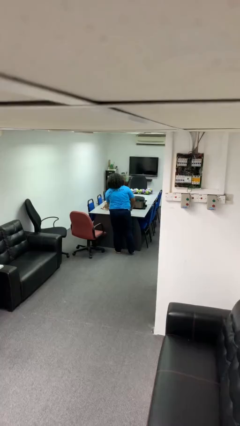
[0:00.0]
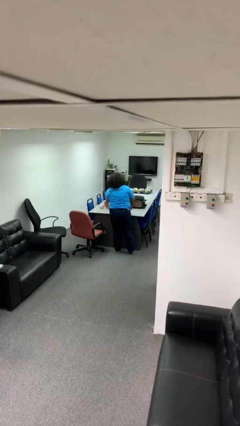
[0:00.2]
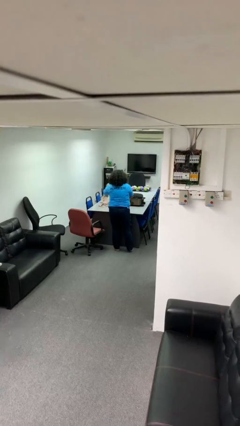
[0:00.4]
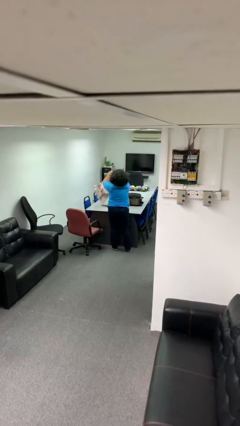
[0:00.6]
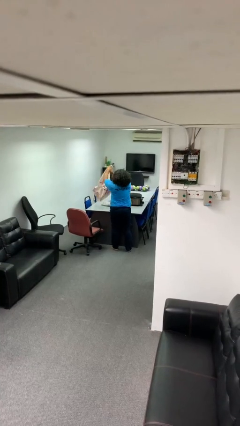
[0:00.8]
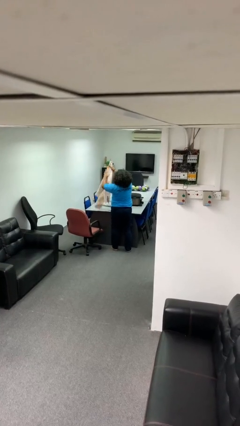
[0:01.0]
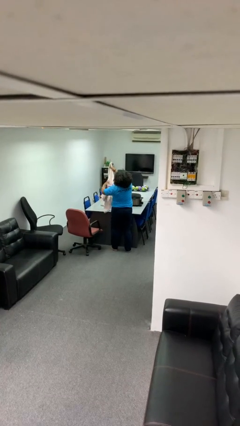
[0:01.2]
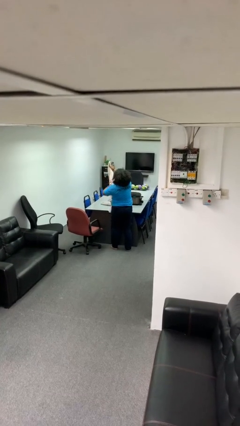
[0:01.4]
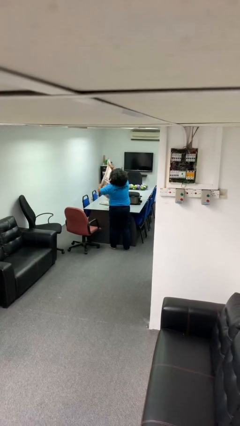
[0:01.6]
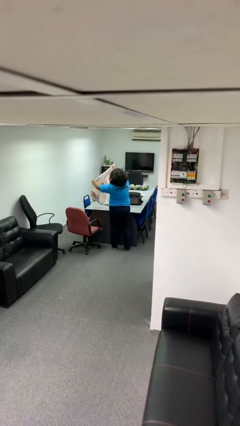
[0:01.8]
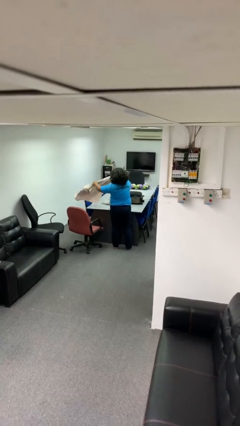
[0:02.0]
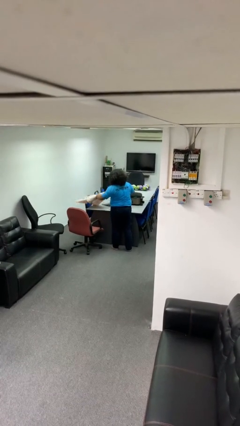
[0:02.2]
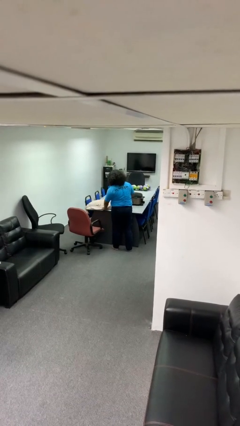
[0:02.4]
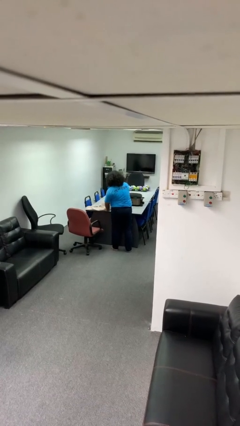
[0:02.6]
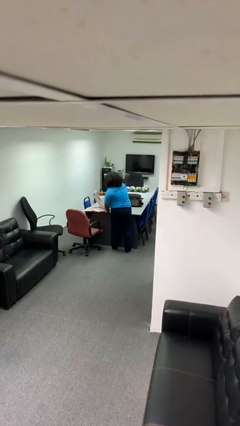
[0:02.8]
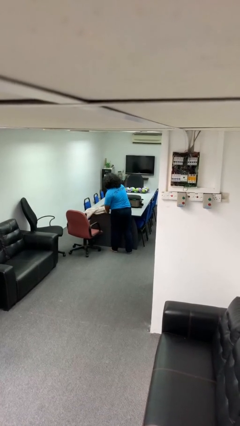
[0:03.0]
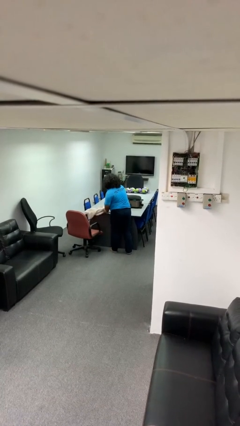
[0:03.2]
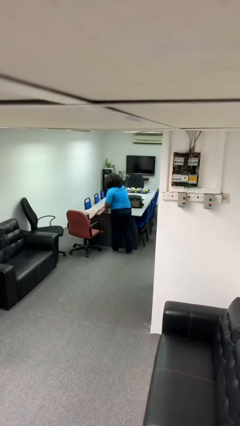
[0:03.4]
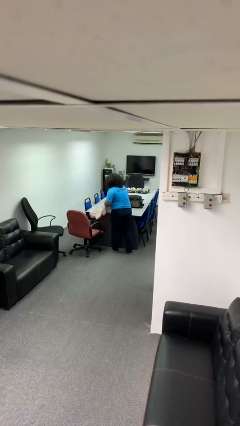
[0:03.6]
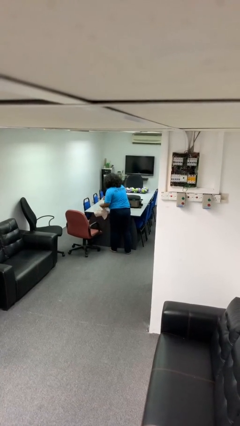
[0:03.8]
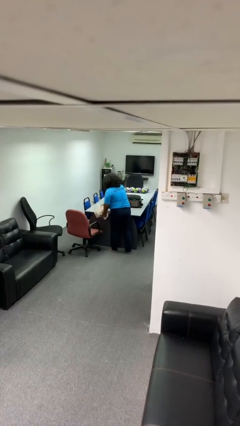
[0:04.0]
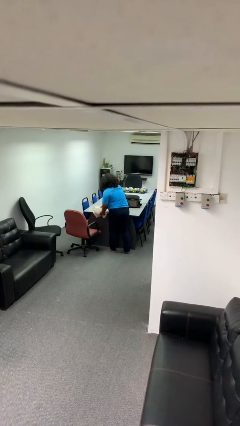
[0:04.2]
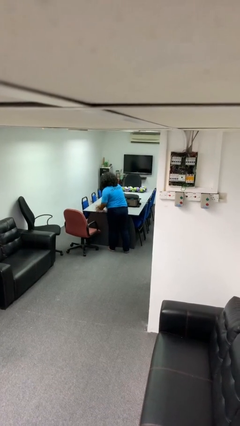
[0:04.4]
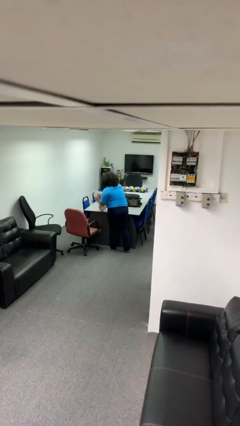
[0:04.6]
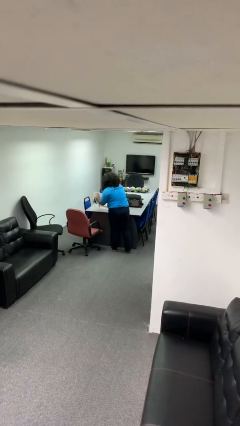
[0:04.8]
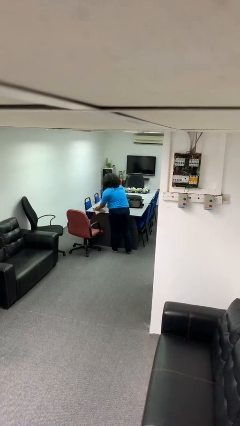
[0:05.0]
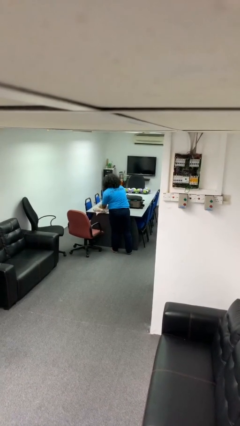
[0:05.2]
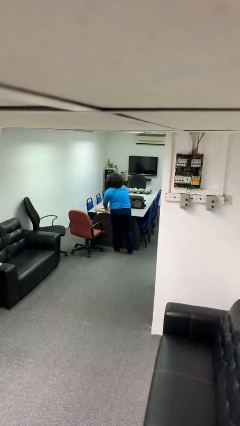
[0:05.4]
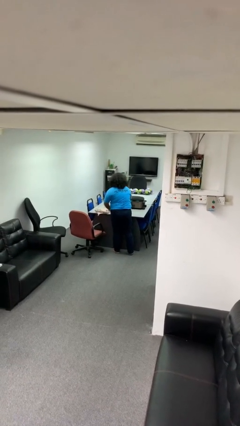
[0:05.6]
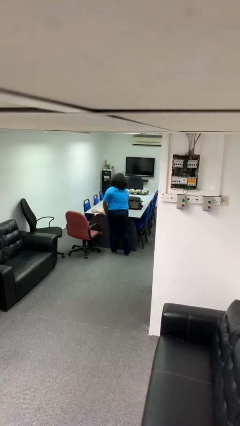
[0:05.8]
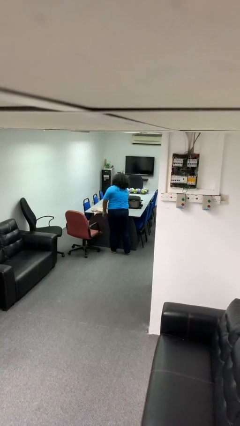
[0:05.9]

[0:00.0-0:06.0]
person folds towel

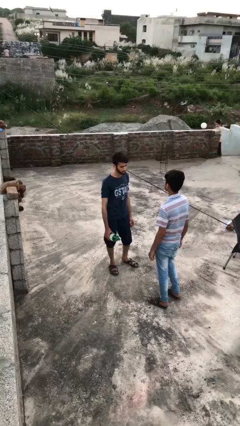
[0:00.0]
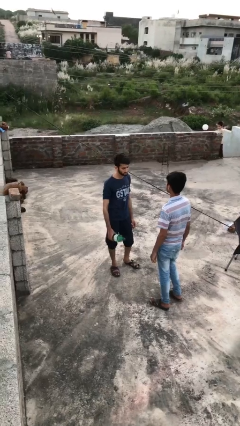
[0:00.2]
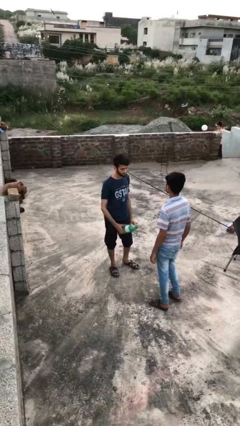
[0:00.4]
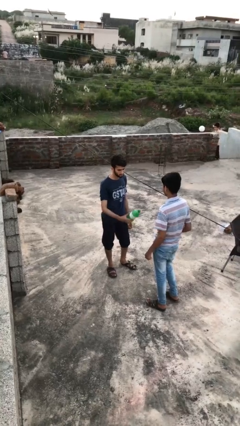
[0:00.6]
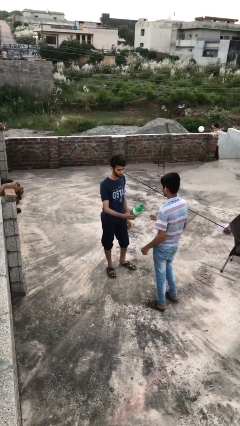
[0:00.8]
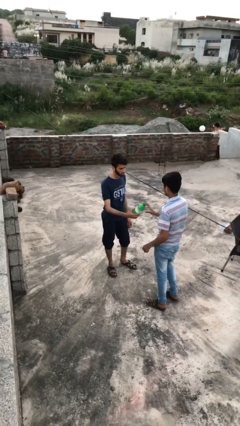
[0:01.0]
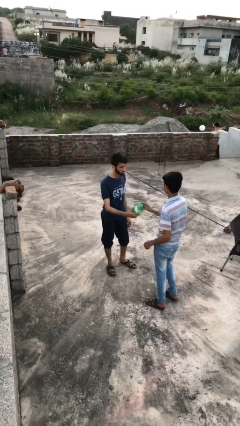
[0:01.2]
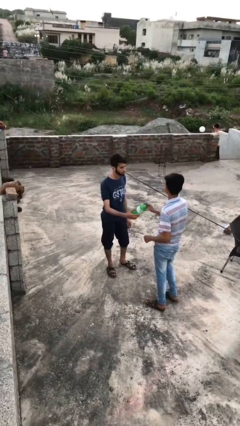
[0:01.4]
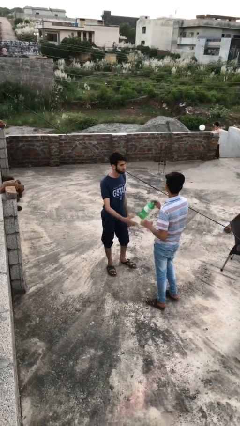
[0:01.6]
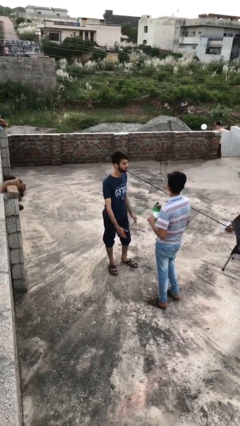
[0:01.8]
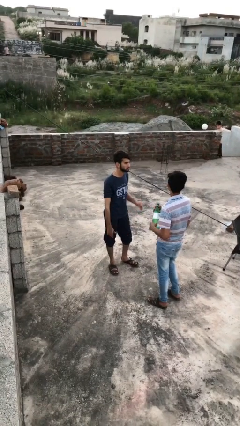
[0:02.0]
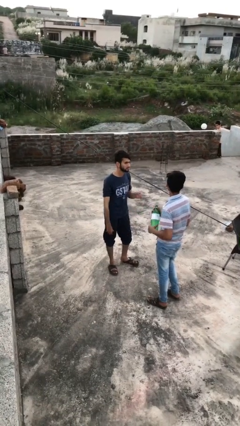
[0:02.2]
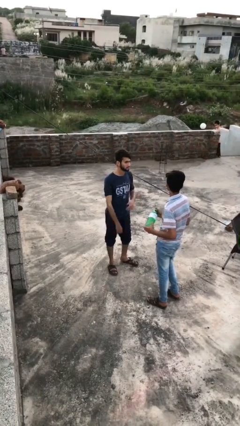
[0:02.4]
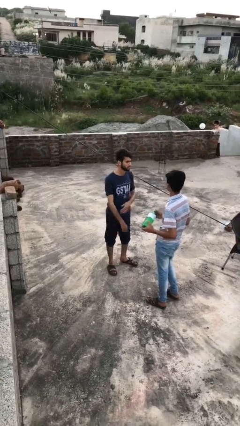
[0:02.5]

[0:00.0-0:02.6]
person transfers object to person

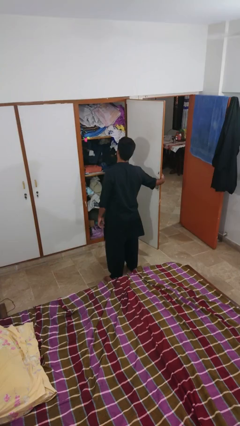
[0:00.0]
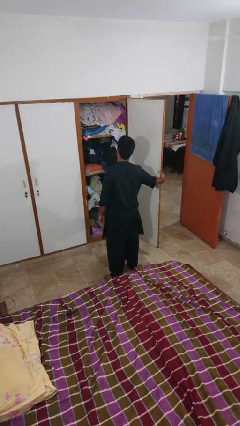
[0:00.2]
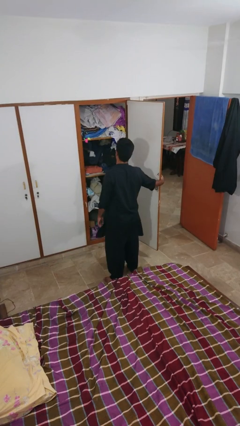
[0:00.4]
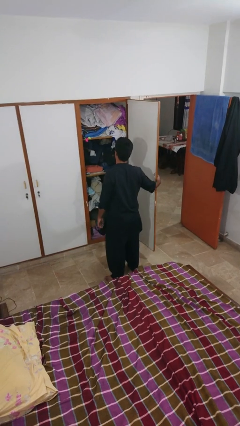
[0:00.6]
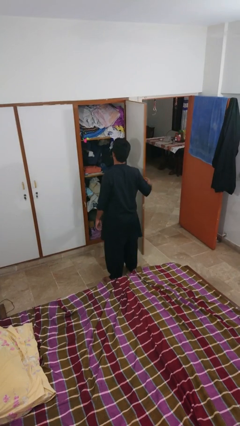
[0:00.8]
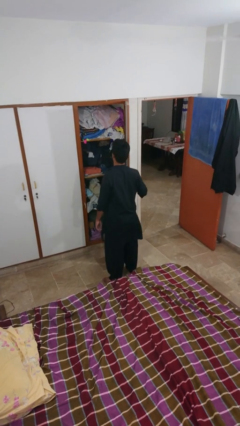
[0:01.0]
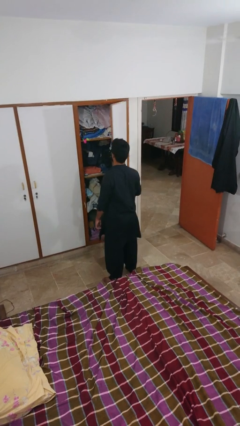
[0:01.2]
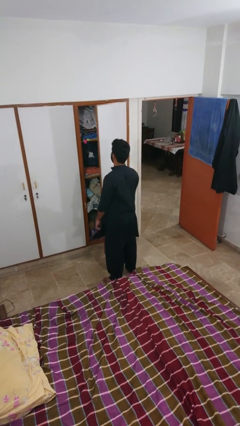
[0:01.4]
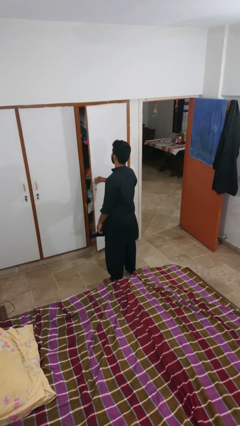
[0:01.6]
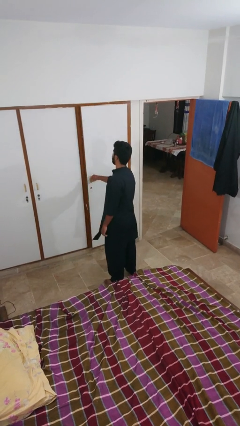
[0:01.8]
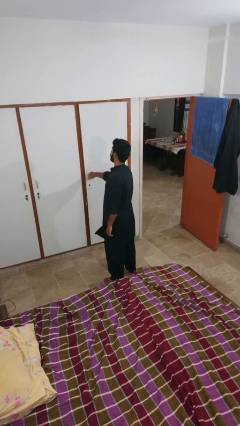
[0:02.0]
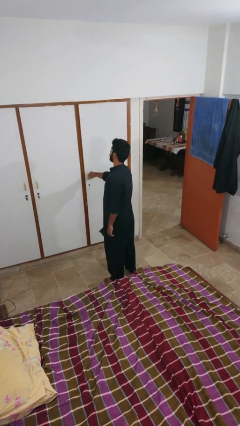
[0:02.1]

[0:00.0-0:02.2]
person closes closet door

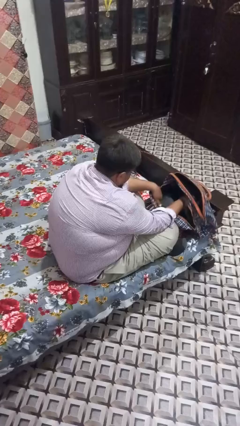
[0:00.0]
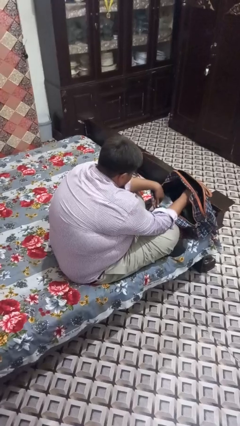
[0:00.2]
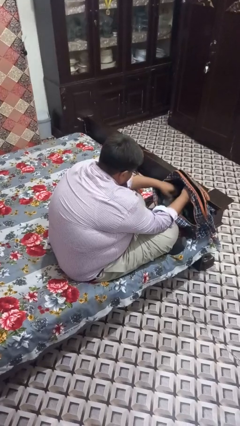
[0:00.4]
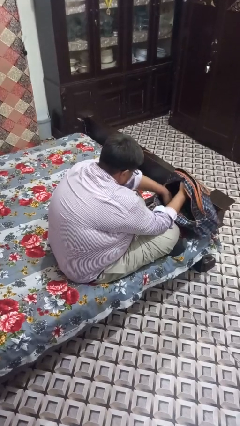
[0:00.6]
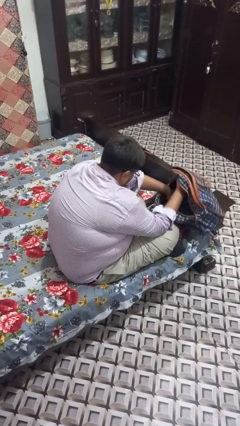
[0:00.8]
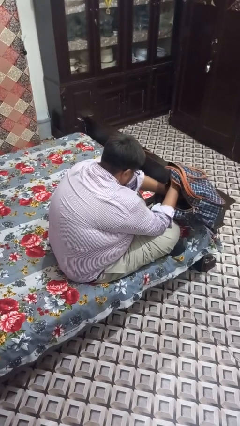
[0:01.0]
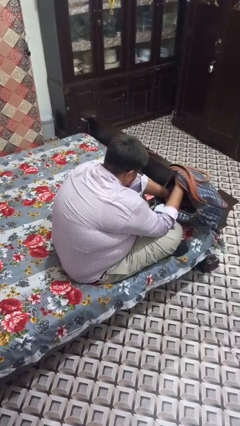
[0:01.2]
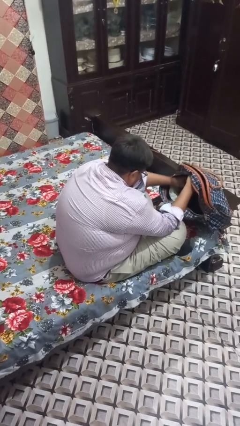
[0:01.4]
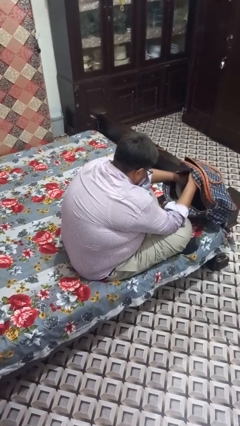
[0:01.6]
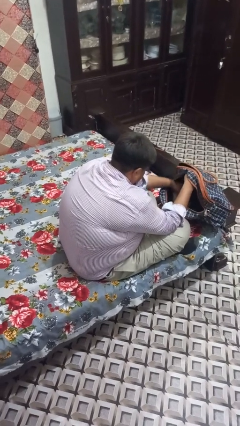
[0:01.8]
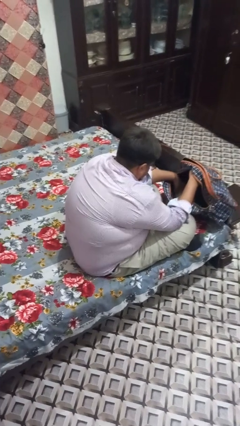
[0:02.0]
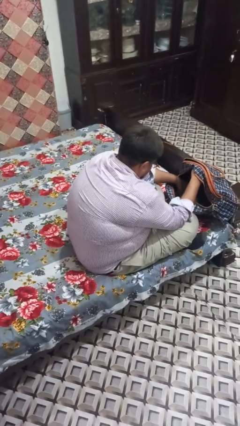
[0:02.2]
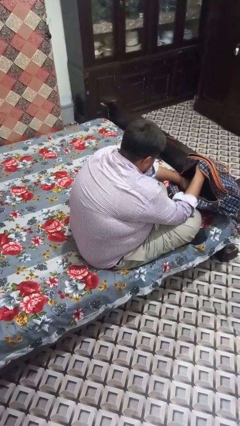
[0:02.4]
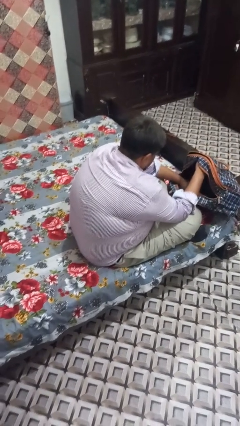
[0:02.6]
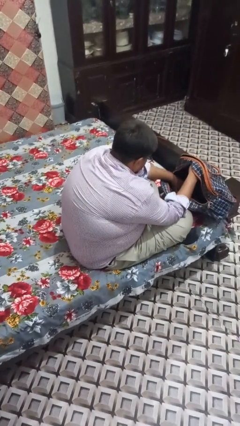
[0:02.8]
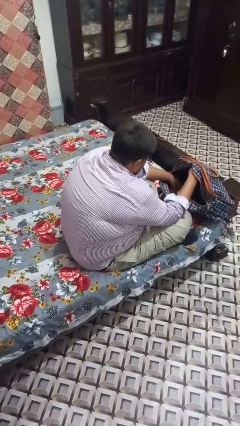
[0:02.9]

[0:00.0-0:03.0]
person searches in backpack

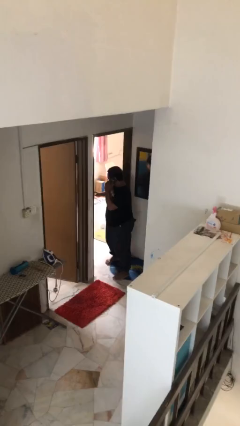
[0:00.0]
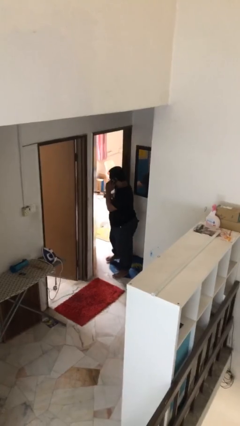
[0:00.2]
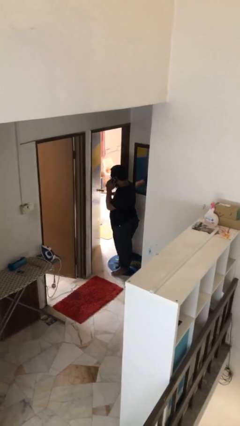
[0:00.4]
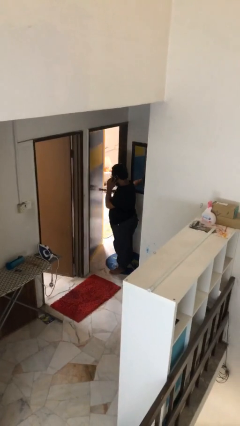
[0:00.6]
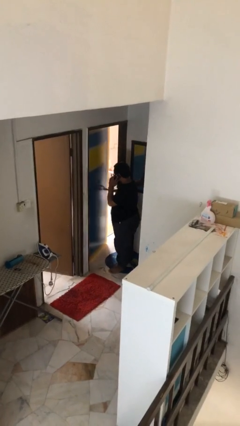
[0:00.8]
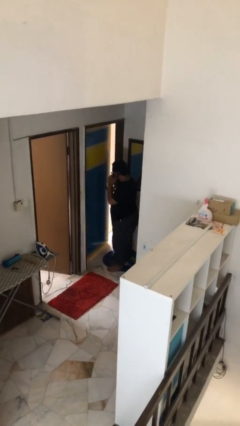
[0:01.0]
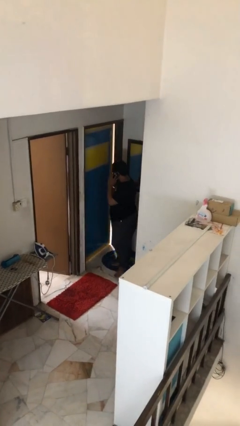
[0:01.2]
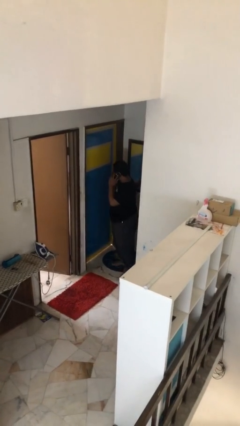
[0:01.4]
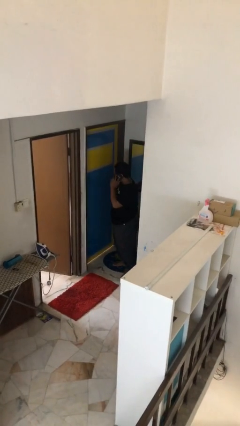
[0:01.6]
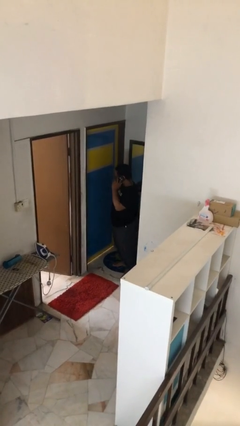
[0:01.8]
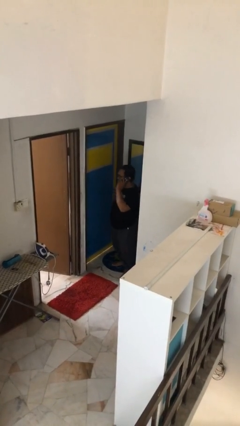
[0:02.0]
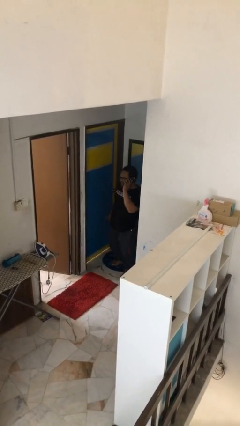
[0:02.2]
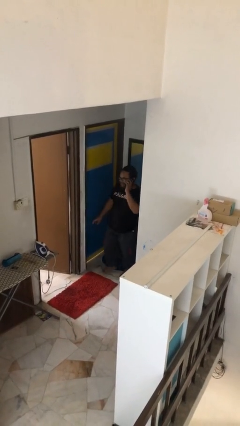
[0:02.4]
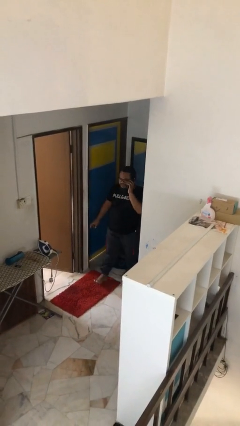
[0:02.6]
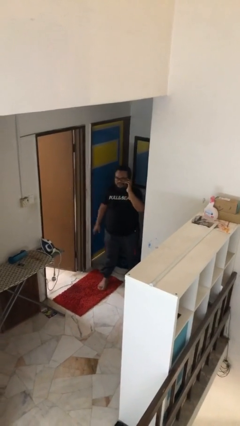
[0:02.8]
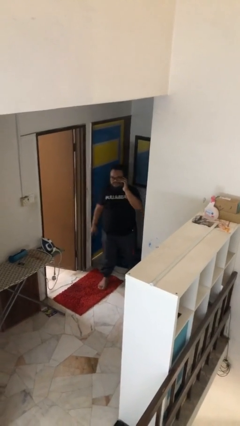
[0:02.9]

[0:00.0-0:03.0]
person closes facility door

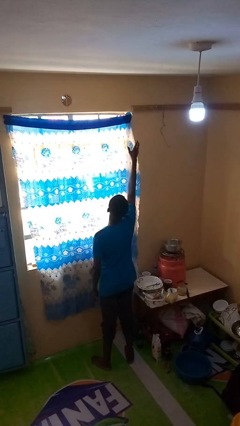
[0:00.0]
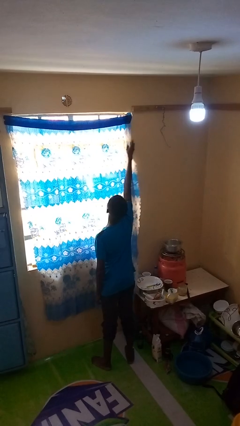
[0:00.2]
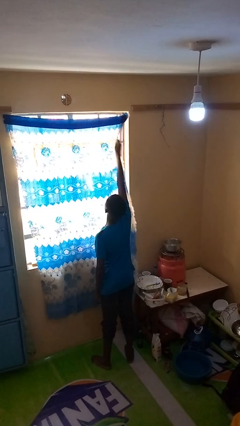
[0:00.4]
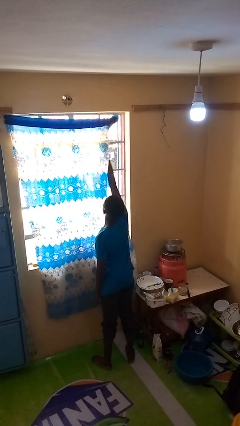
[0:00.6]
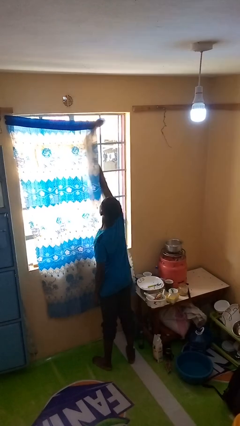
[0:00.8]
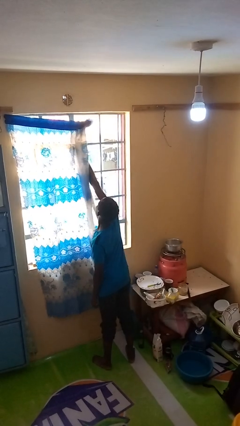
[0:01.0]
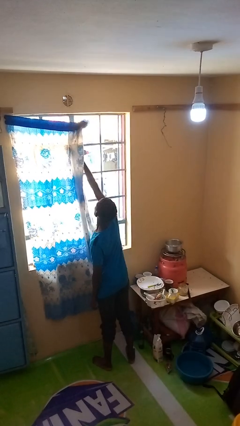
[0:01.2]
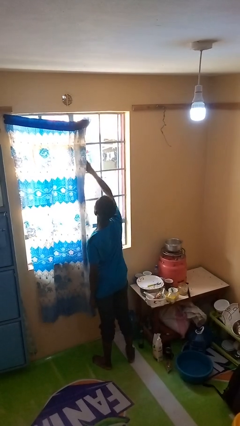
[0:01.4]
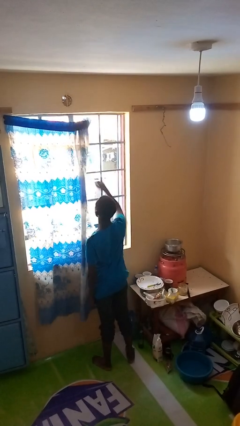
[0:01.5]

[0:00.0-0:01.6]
person opens curtains
